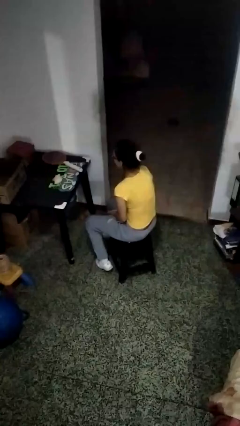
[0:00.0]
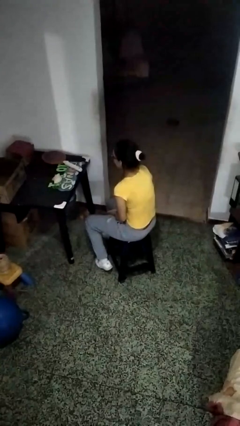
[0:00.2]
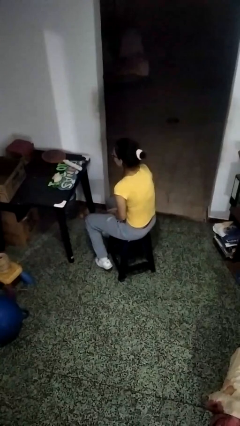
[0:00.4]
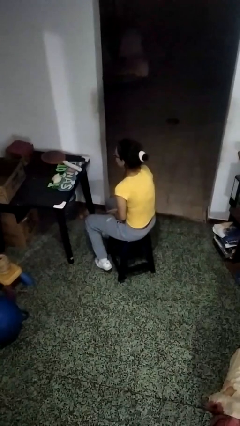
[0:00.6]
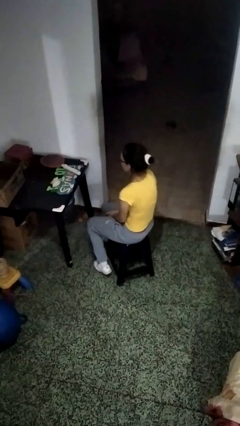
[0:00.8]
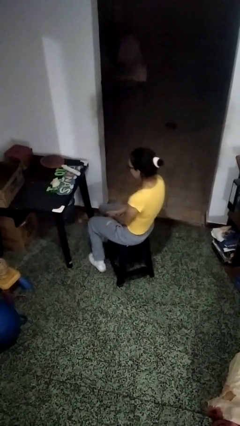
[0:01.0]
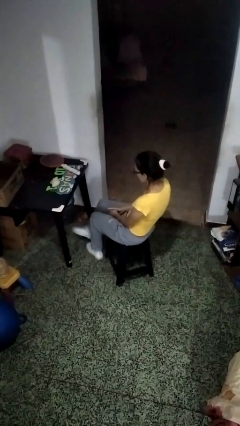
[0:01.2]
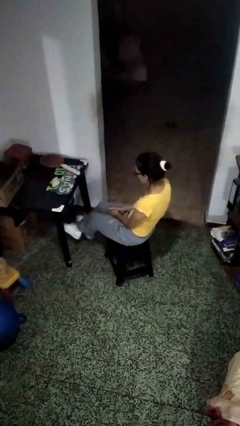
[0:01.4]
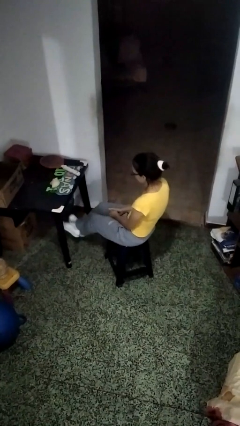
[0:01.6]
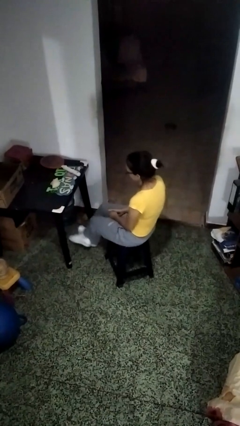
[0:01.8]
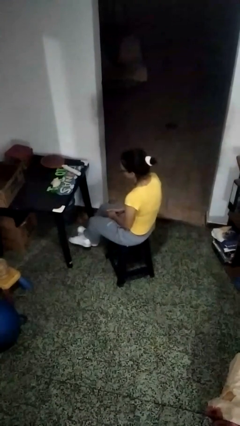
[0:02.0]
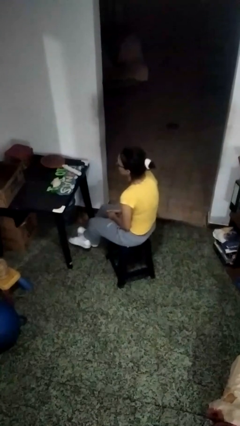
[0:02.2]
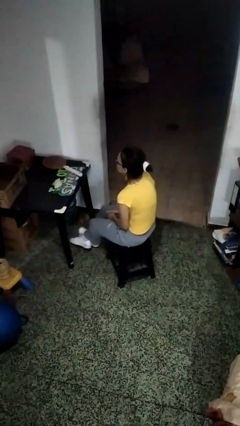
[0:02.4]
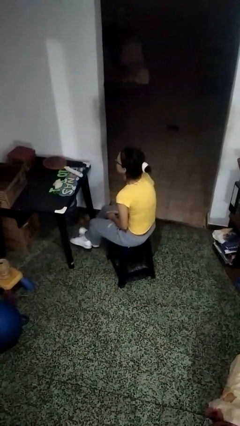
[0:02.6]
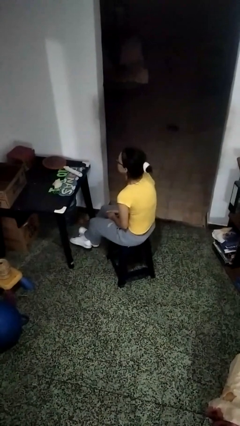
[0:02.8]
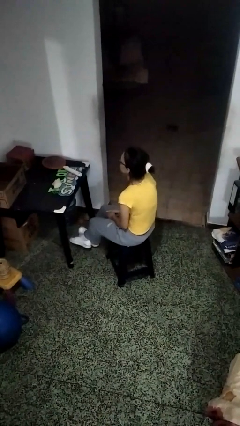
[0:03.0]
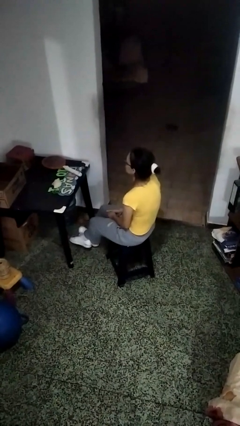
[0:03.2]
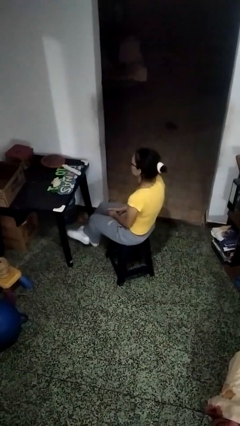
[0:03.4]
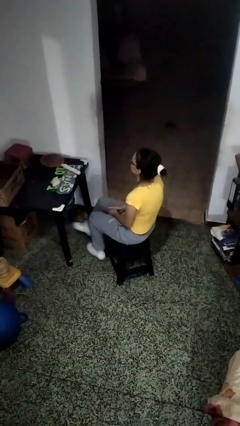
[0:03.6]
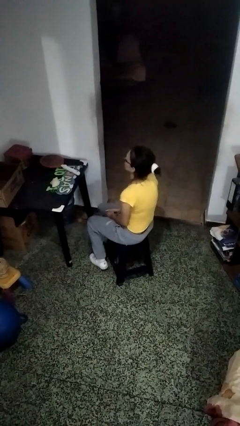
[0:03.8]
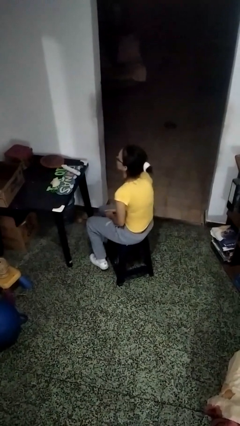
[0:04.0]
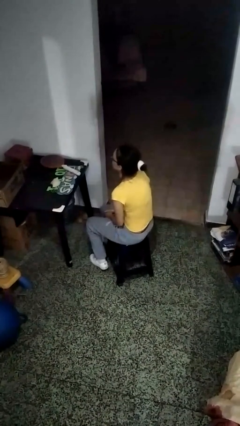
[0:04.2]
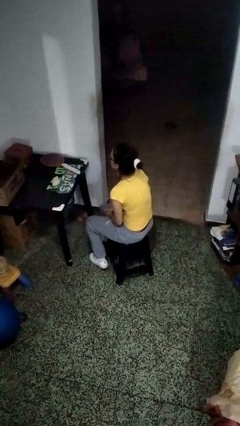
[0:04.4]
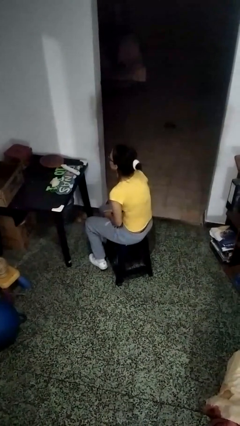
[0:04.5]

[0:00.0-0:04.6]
person crosses legs

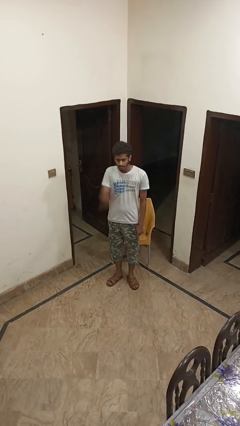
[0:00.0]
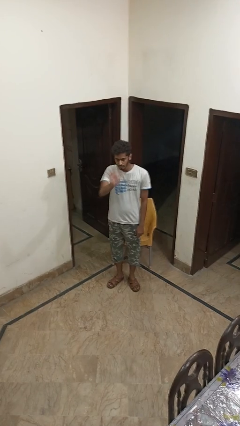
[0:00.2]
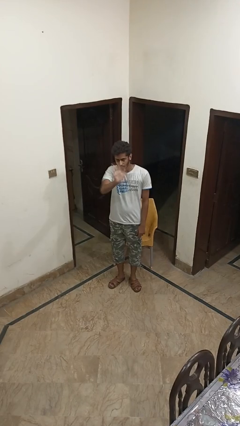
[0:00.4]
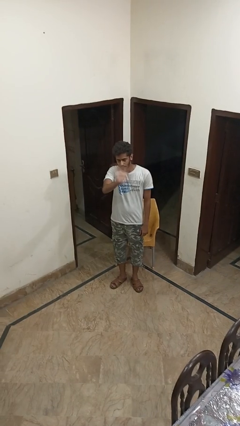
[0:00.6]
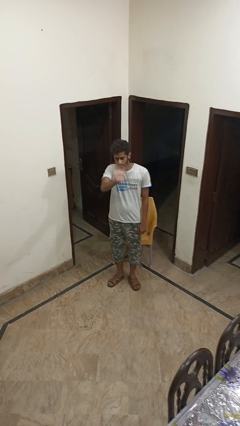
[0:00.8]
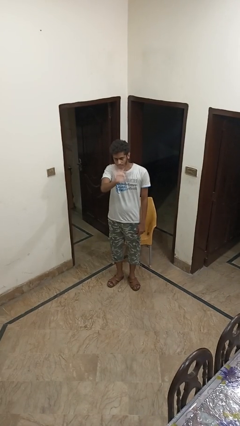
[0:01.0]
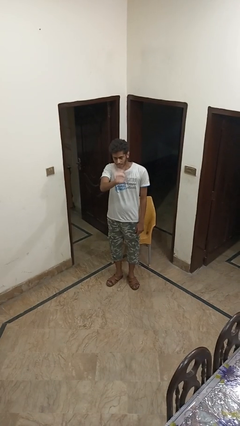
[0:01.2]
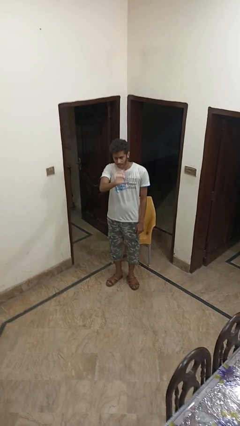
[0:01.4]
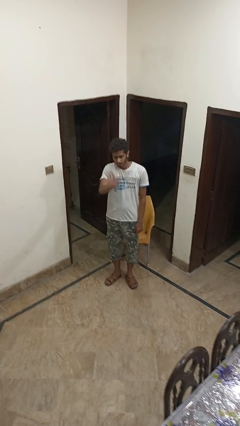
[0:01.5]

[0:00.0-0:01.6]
person waves at person

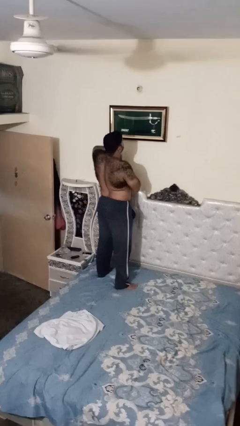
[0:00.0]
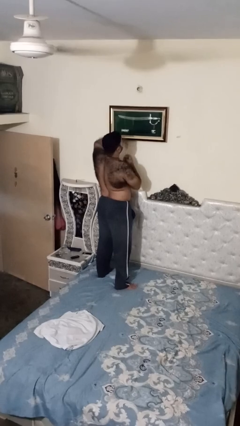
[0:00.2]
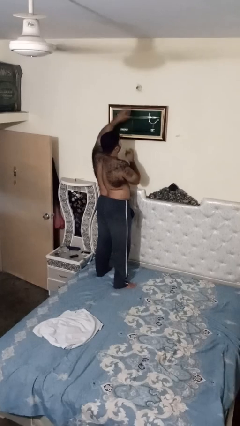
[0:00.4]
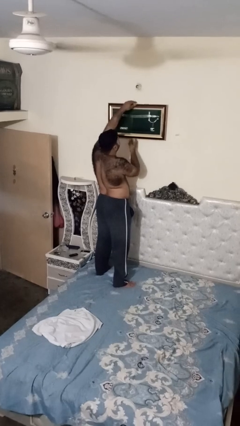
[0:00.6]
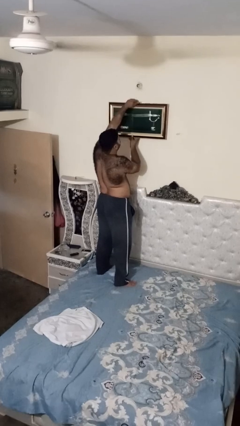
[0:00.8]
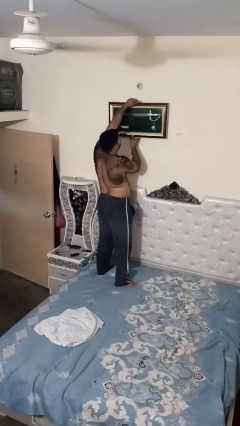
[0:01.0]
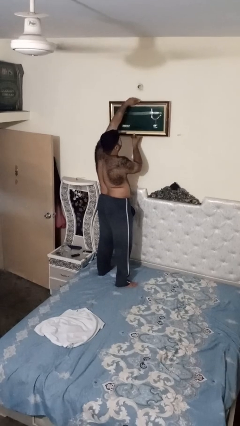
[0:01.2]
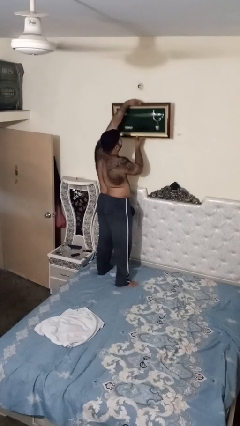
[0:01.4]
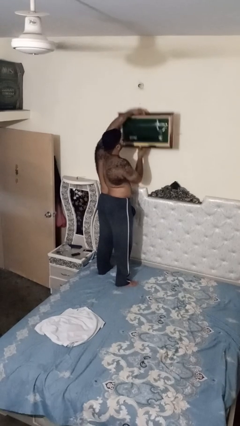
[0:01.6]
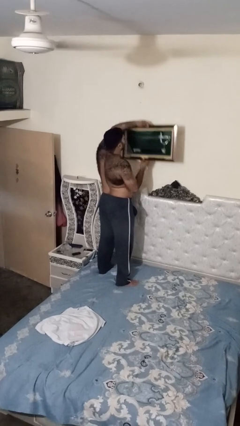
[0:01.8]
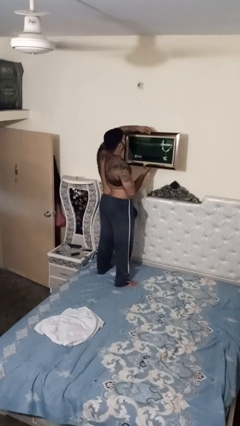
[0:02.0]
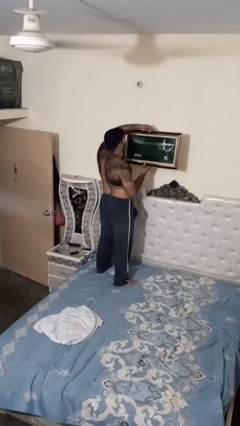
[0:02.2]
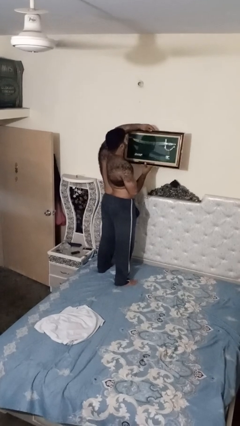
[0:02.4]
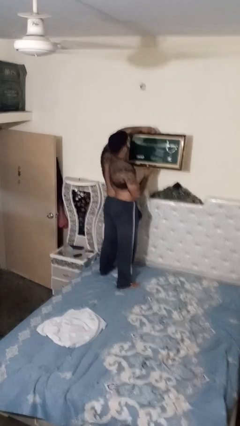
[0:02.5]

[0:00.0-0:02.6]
person takes down picture frame

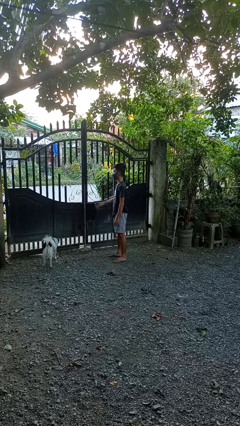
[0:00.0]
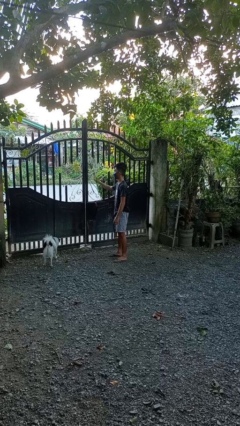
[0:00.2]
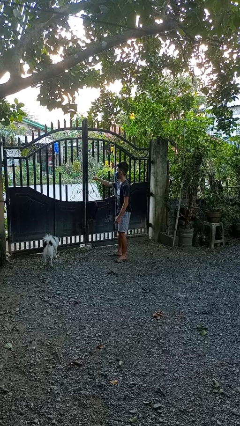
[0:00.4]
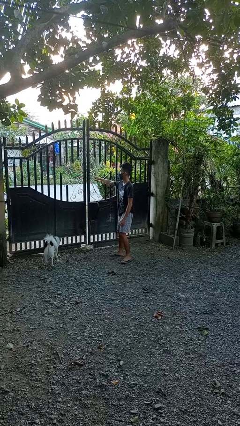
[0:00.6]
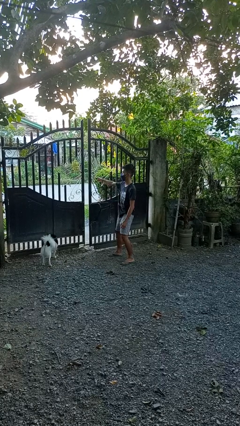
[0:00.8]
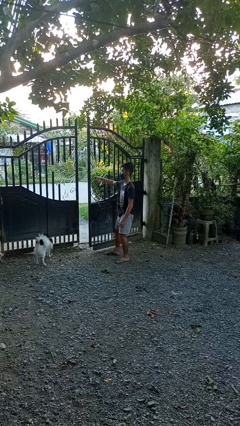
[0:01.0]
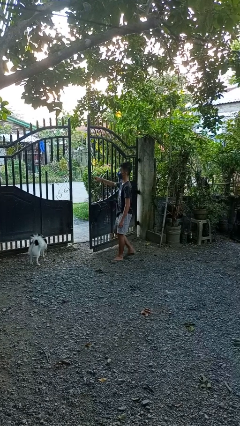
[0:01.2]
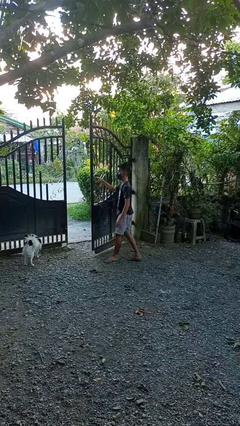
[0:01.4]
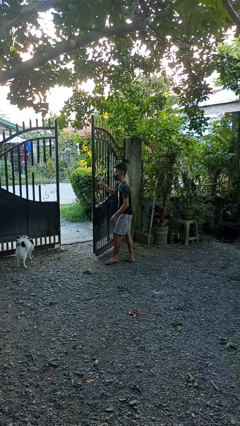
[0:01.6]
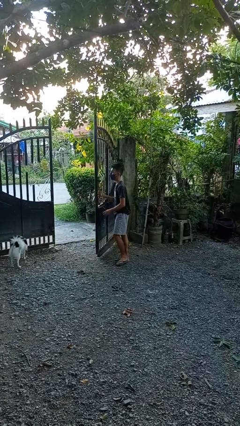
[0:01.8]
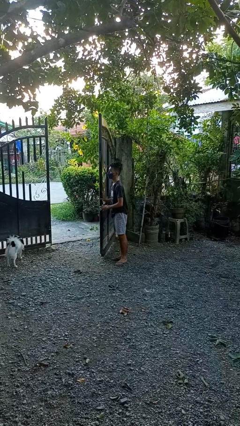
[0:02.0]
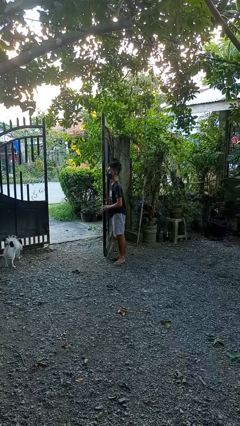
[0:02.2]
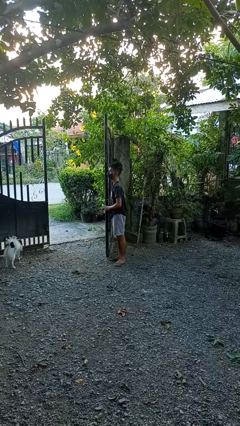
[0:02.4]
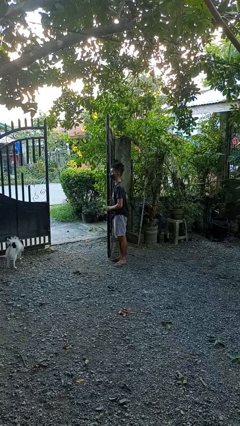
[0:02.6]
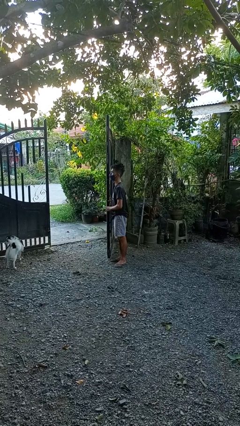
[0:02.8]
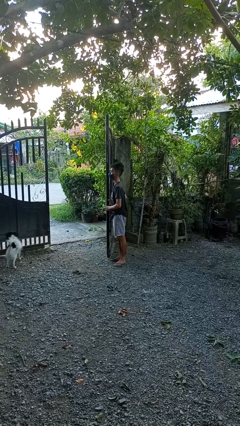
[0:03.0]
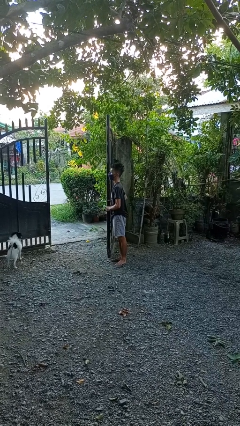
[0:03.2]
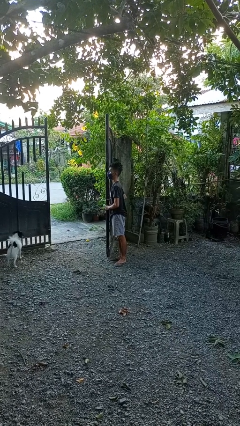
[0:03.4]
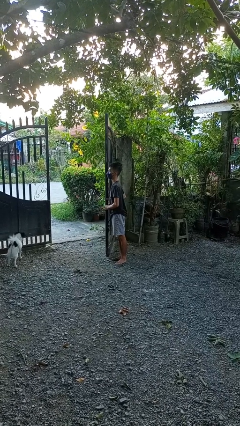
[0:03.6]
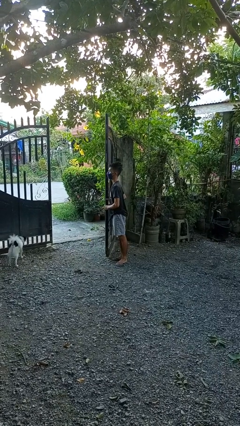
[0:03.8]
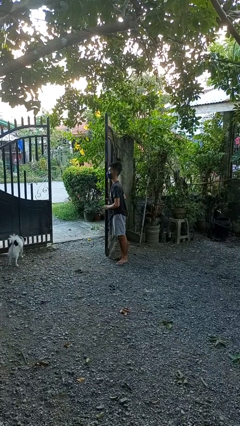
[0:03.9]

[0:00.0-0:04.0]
person opens gate

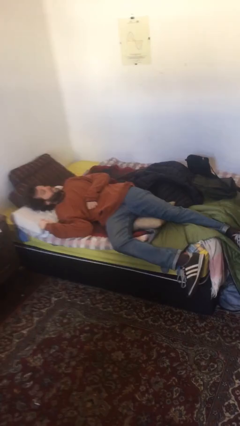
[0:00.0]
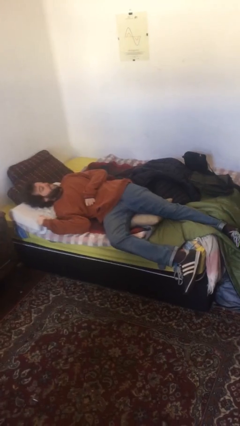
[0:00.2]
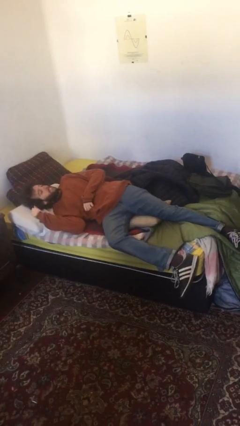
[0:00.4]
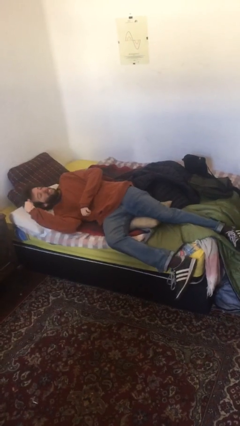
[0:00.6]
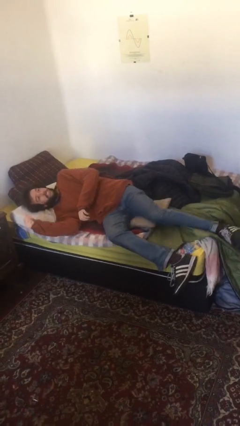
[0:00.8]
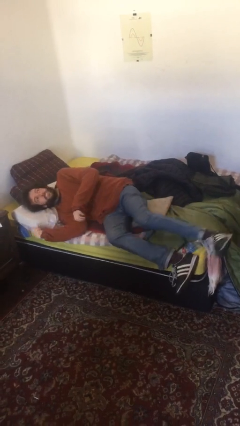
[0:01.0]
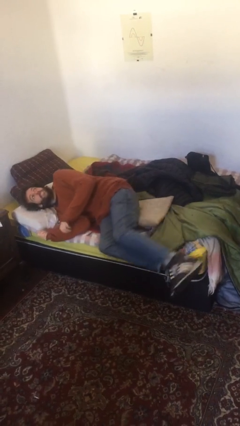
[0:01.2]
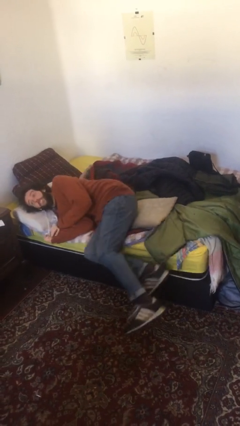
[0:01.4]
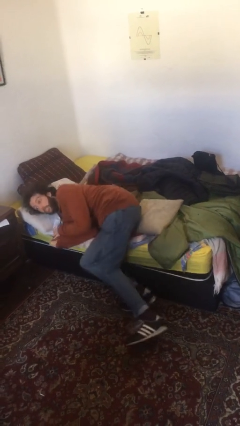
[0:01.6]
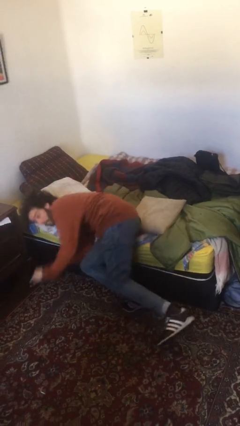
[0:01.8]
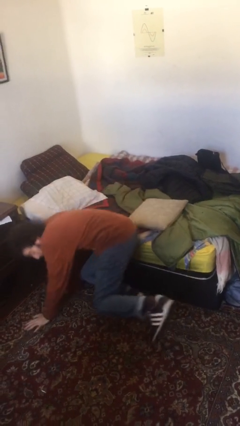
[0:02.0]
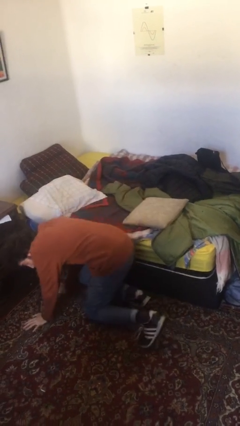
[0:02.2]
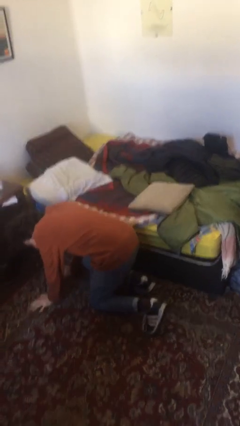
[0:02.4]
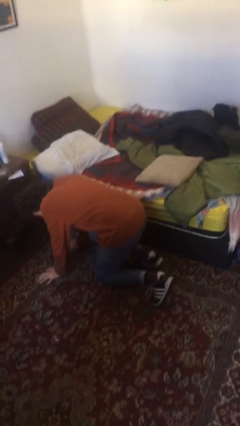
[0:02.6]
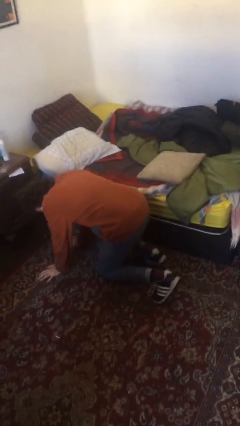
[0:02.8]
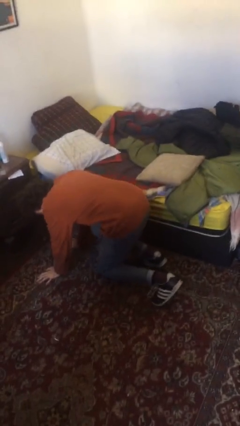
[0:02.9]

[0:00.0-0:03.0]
person falls from bed

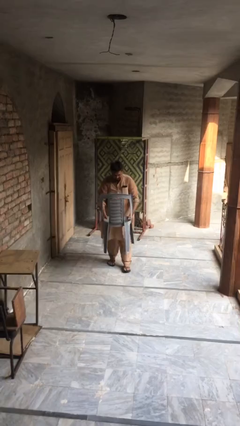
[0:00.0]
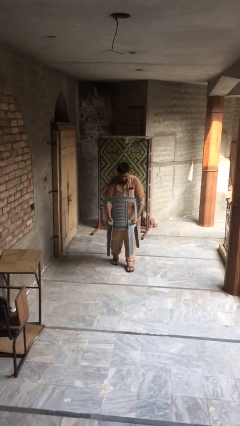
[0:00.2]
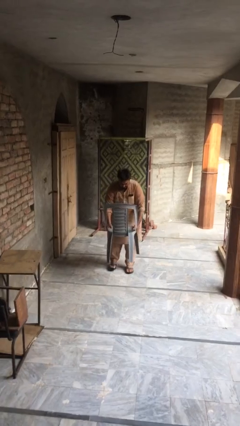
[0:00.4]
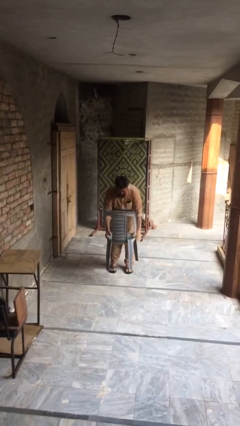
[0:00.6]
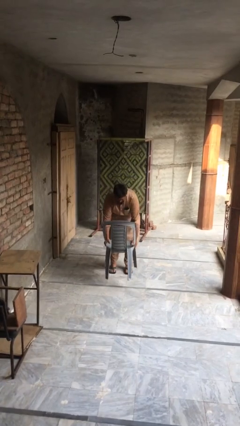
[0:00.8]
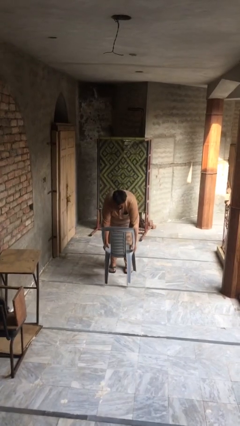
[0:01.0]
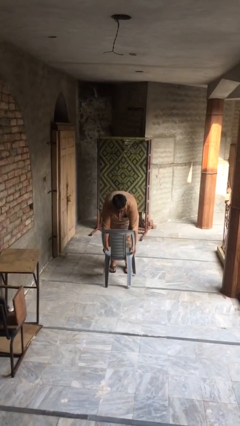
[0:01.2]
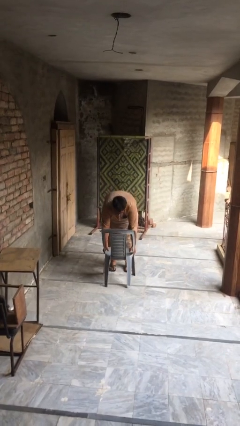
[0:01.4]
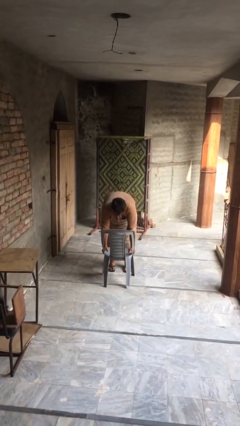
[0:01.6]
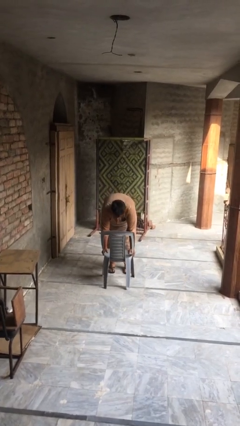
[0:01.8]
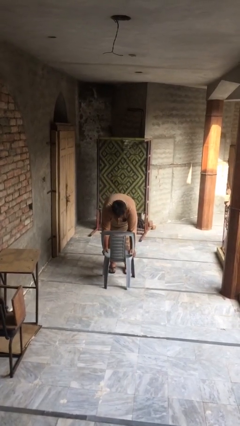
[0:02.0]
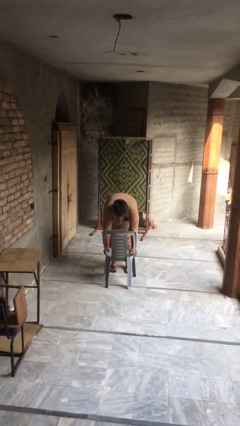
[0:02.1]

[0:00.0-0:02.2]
person puts down object on floor
